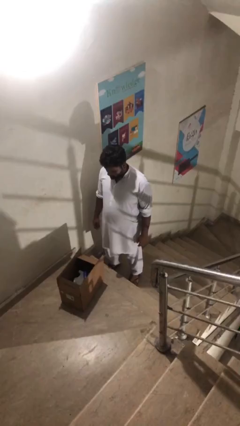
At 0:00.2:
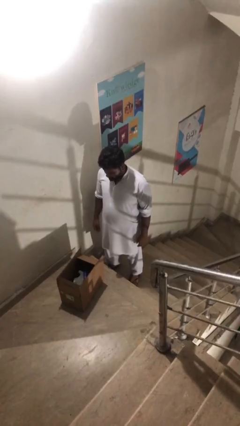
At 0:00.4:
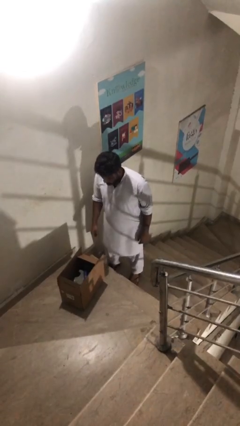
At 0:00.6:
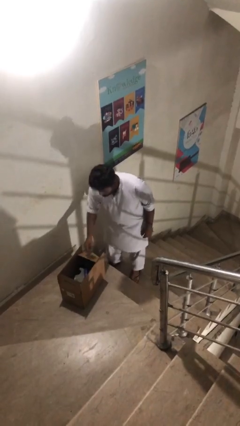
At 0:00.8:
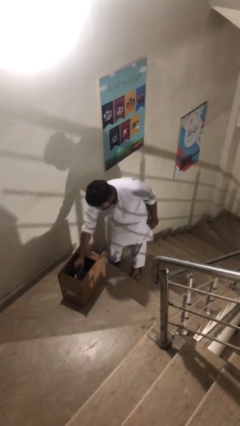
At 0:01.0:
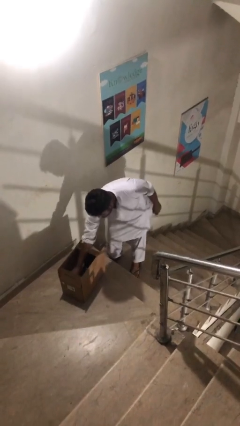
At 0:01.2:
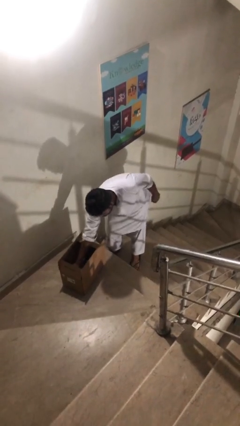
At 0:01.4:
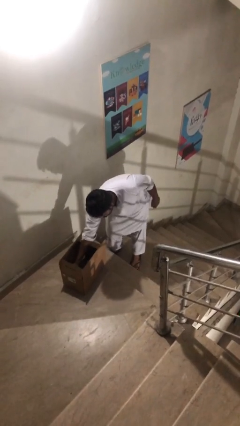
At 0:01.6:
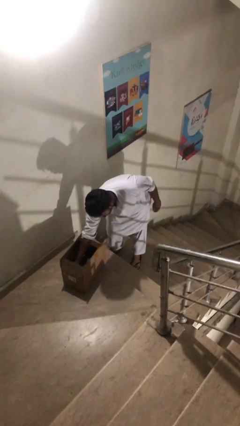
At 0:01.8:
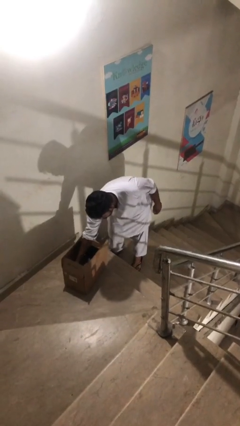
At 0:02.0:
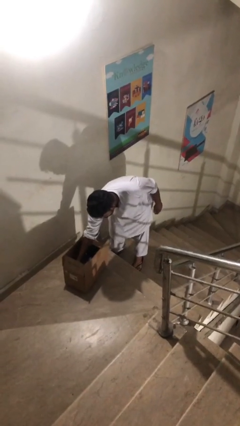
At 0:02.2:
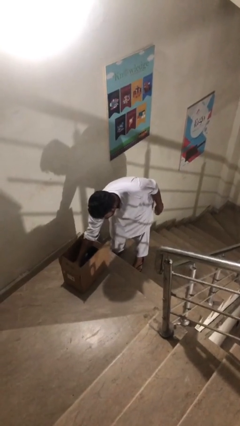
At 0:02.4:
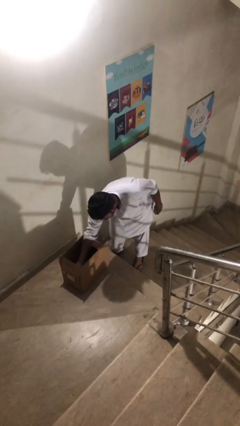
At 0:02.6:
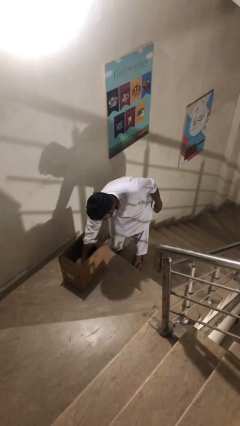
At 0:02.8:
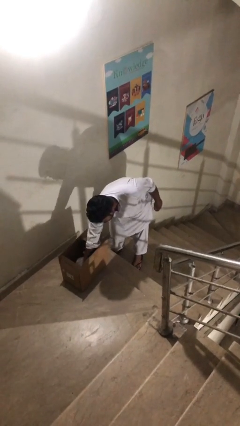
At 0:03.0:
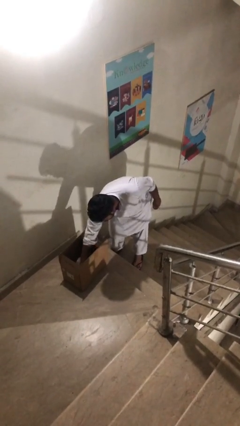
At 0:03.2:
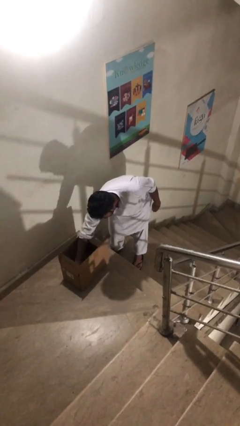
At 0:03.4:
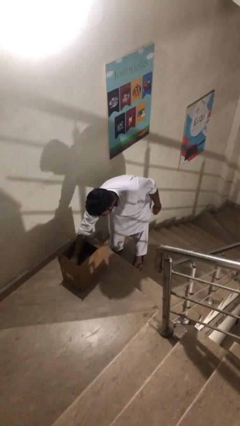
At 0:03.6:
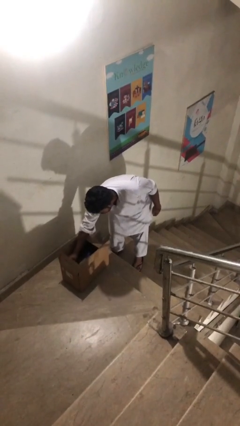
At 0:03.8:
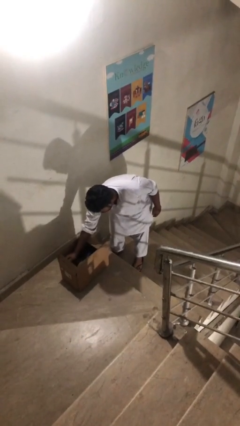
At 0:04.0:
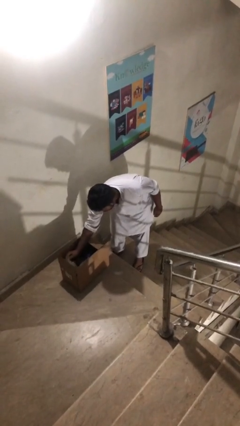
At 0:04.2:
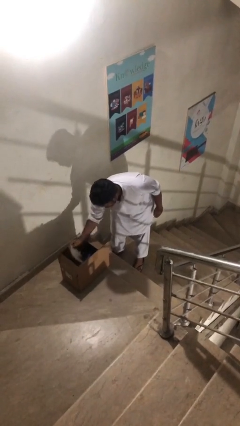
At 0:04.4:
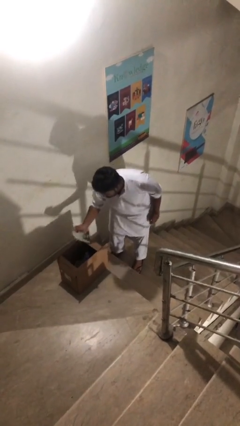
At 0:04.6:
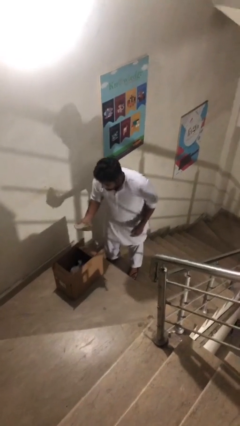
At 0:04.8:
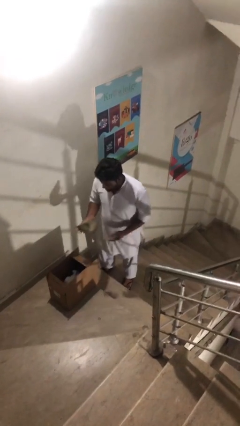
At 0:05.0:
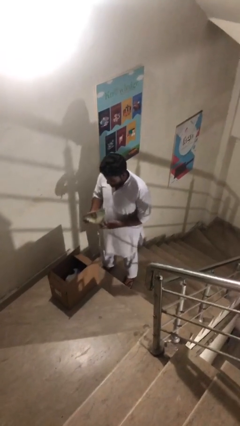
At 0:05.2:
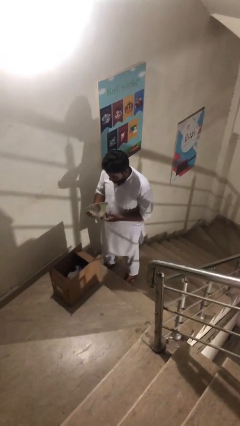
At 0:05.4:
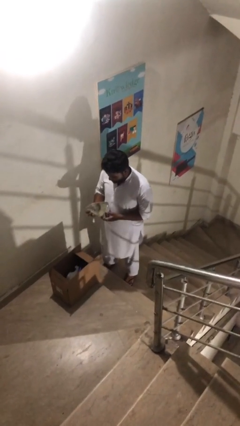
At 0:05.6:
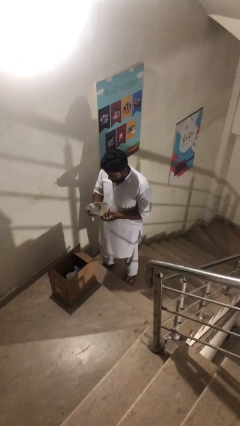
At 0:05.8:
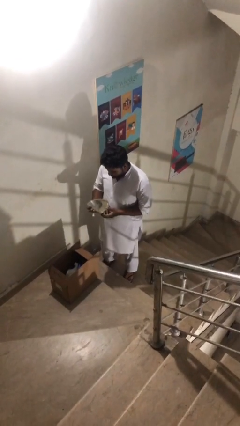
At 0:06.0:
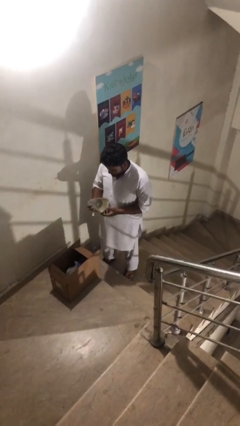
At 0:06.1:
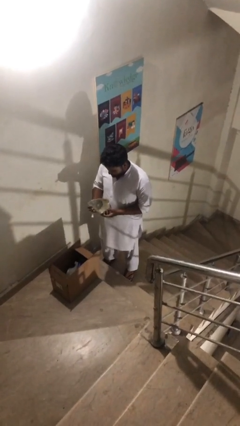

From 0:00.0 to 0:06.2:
person takes object from box

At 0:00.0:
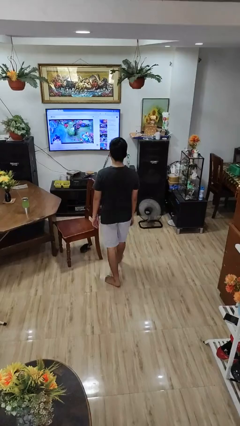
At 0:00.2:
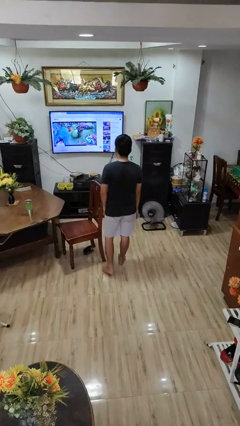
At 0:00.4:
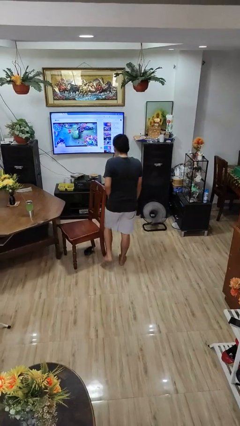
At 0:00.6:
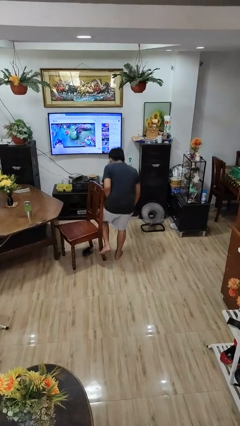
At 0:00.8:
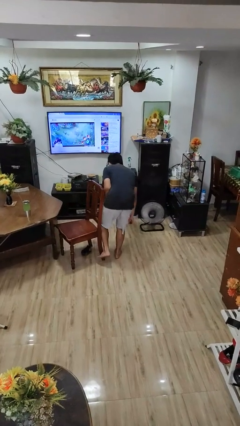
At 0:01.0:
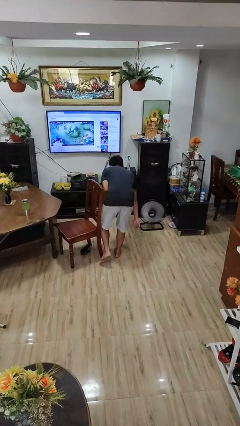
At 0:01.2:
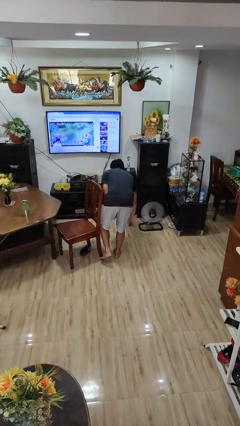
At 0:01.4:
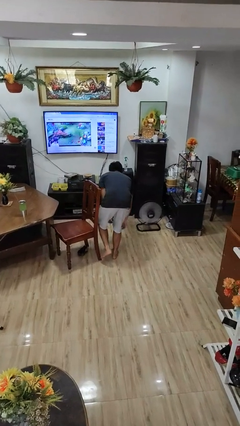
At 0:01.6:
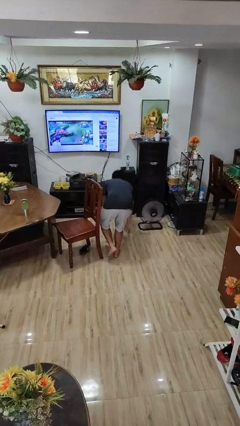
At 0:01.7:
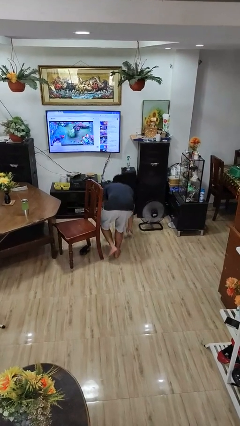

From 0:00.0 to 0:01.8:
person trips on object on floor

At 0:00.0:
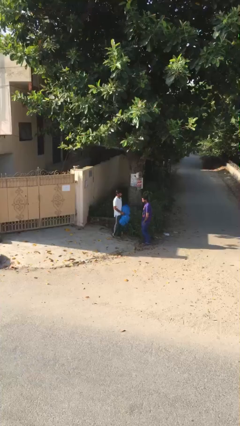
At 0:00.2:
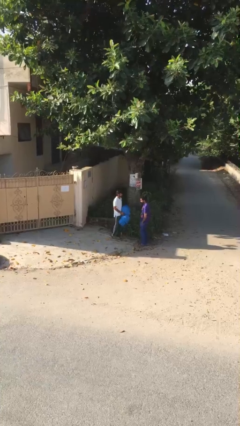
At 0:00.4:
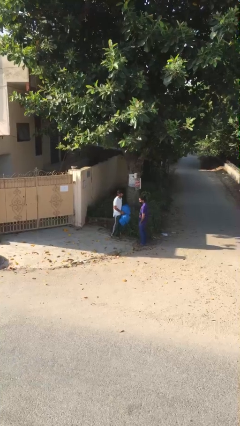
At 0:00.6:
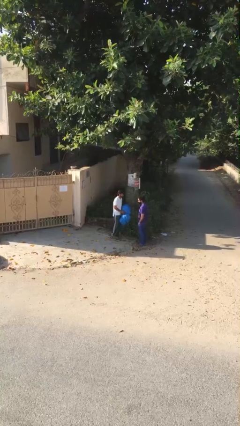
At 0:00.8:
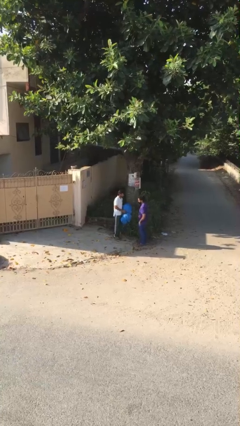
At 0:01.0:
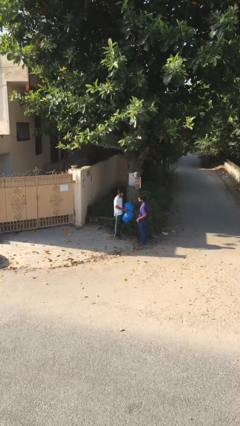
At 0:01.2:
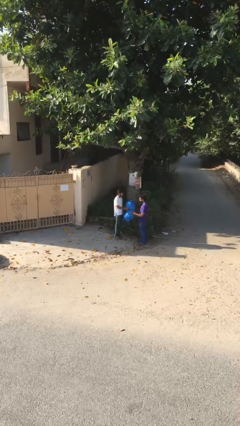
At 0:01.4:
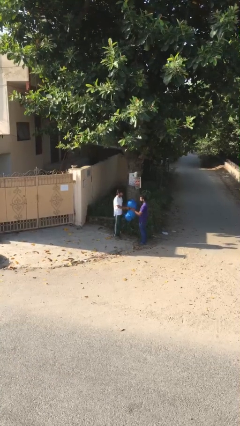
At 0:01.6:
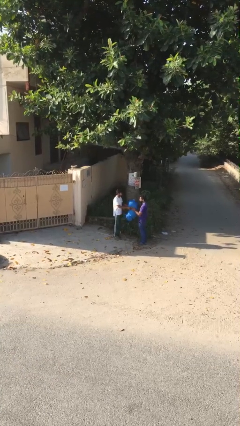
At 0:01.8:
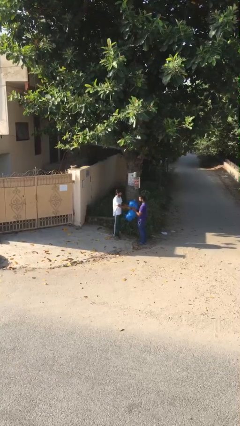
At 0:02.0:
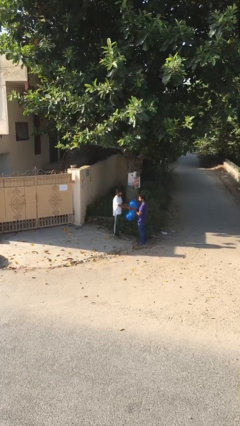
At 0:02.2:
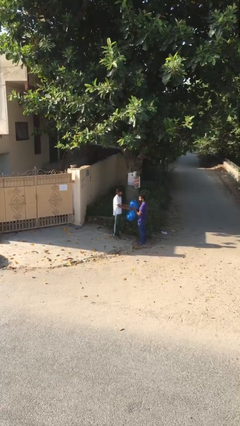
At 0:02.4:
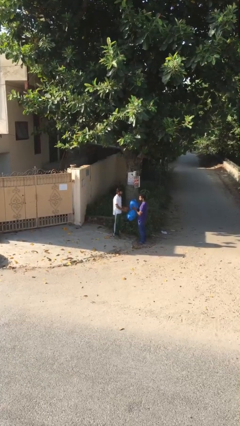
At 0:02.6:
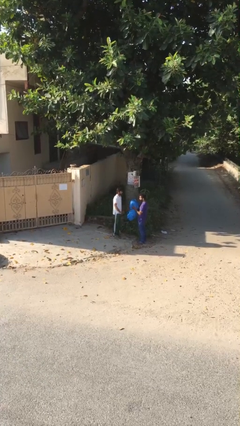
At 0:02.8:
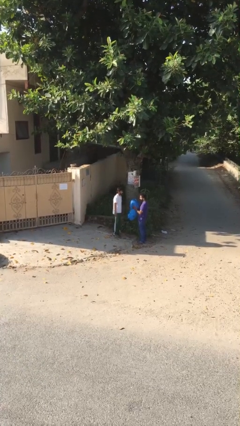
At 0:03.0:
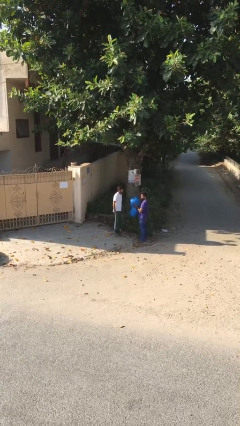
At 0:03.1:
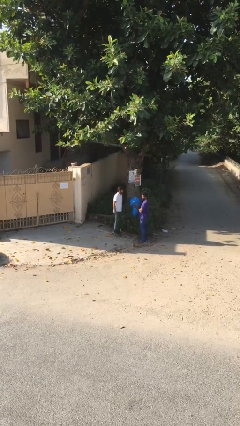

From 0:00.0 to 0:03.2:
person transfers object to person

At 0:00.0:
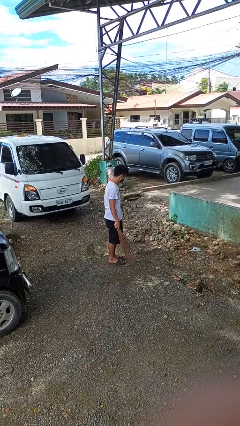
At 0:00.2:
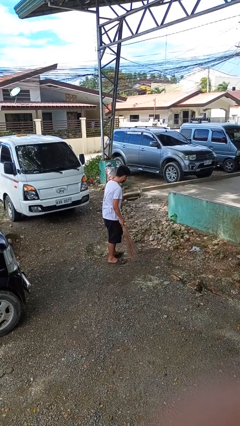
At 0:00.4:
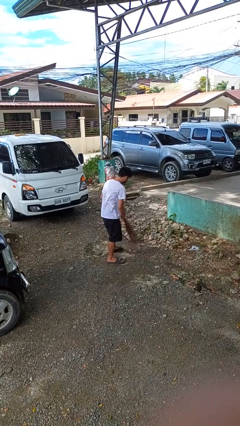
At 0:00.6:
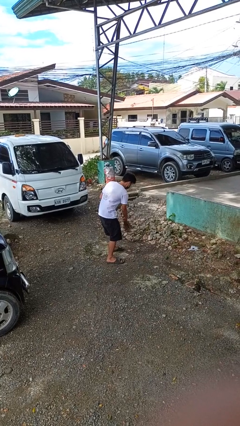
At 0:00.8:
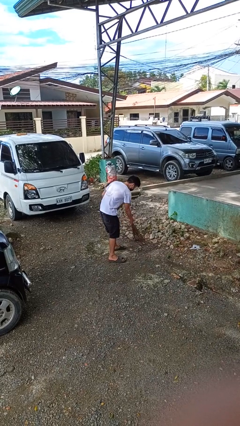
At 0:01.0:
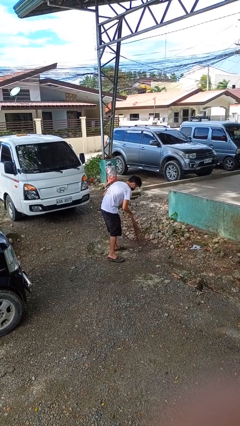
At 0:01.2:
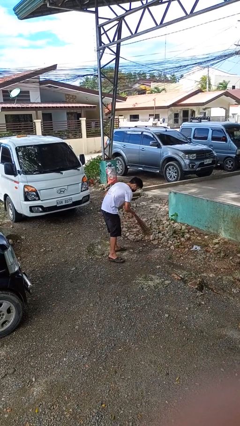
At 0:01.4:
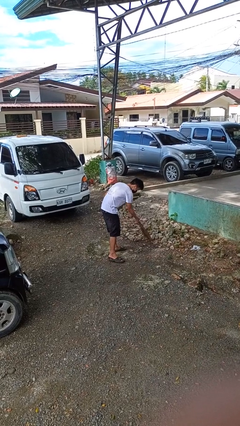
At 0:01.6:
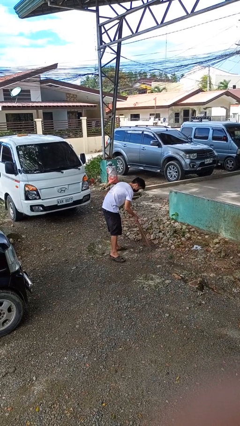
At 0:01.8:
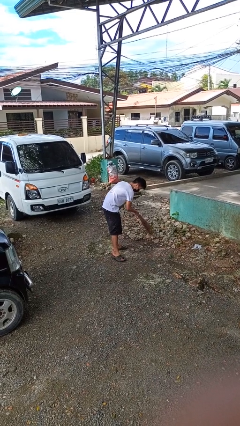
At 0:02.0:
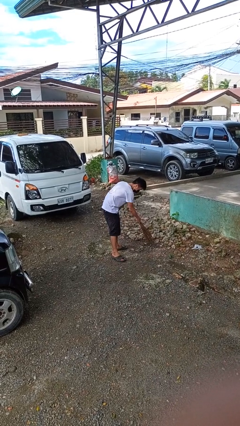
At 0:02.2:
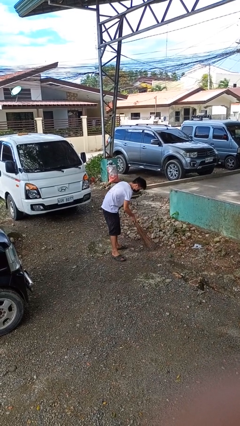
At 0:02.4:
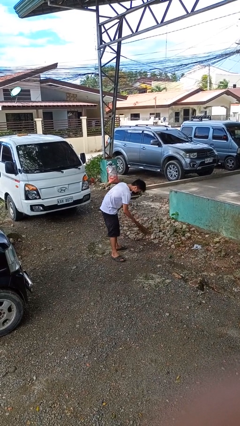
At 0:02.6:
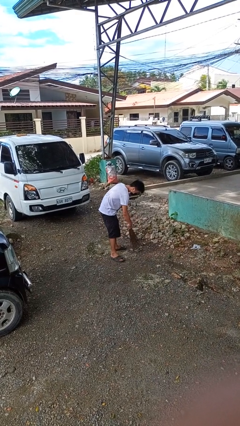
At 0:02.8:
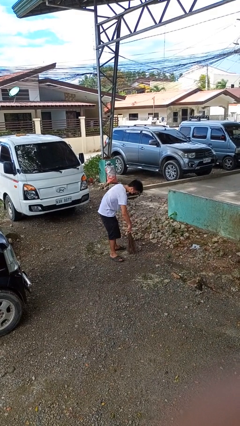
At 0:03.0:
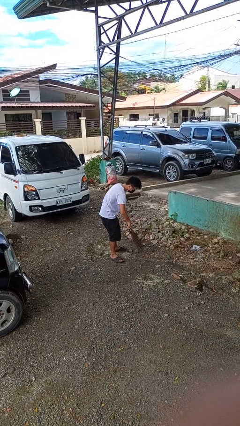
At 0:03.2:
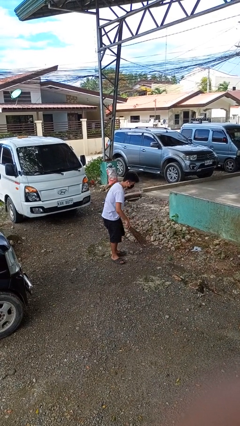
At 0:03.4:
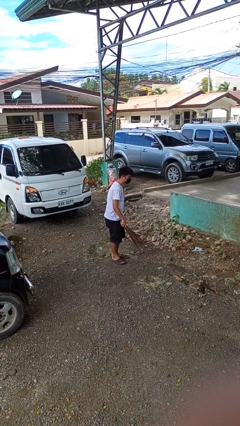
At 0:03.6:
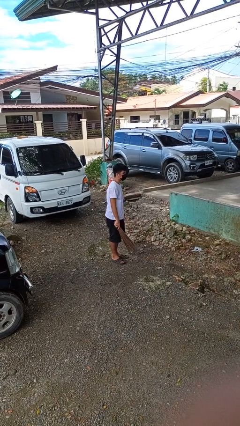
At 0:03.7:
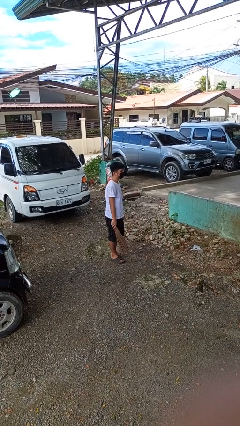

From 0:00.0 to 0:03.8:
person sweeps floor

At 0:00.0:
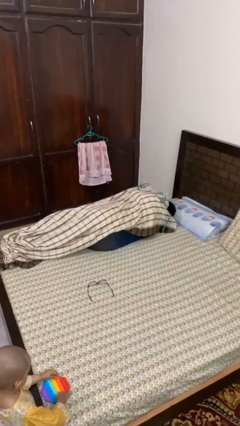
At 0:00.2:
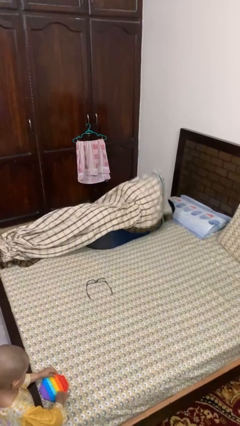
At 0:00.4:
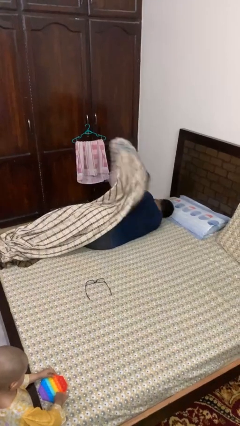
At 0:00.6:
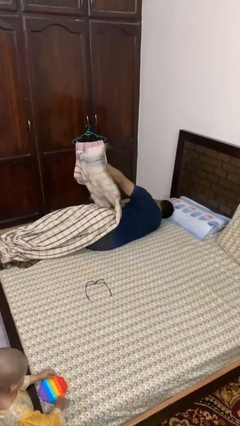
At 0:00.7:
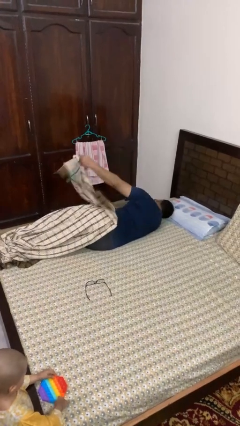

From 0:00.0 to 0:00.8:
person uncovers with blanket

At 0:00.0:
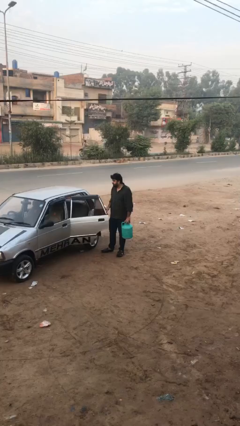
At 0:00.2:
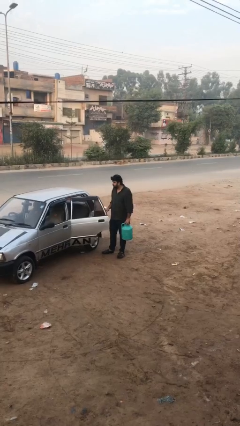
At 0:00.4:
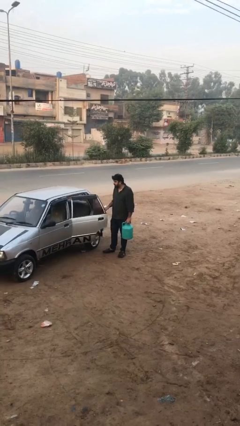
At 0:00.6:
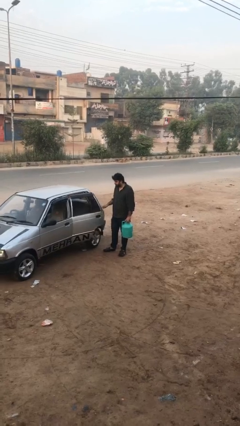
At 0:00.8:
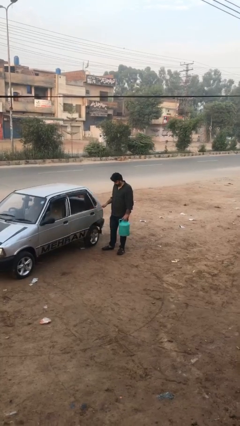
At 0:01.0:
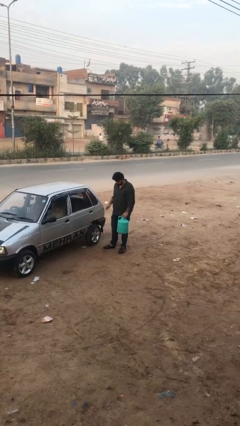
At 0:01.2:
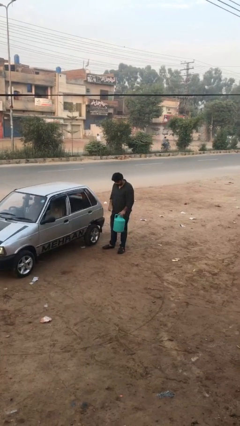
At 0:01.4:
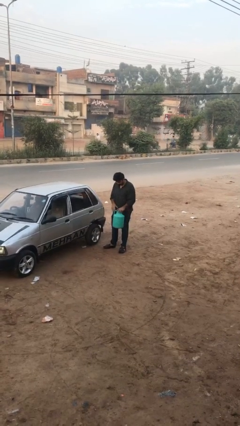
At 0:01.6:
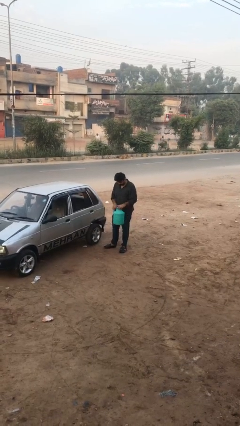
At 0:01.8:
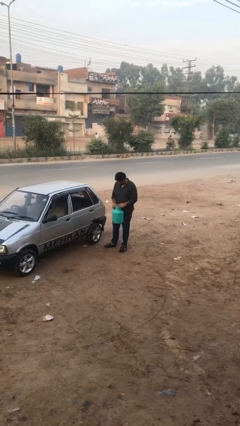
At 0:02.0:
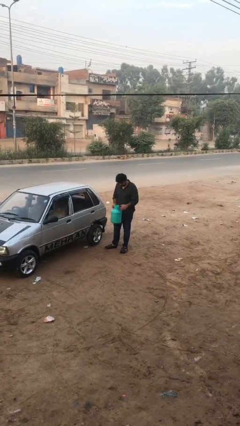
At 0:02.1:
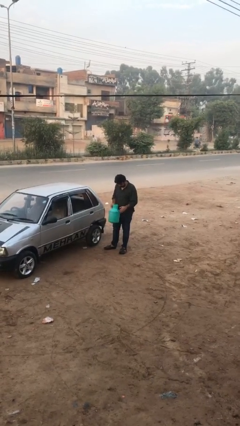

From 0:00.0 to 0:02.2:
person closes car door
